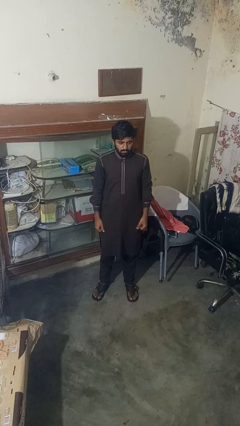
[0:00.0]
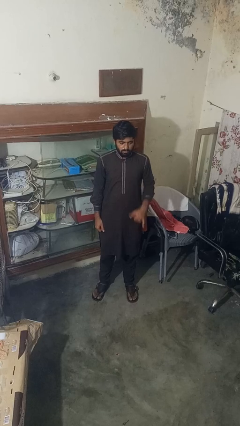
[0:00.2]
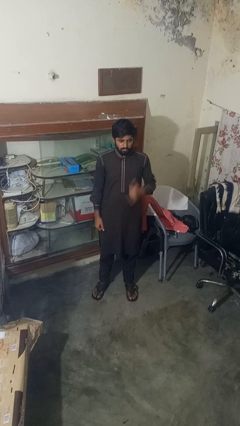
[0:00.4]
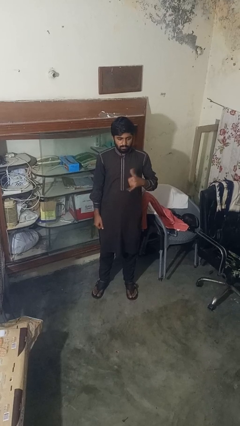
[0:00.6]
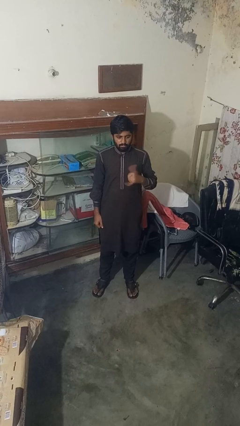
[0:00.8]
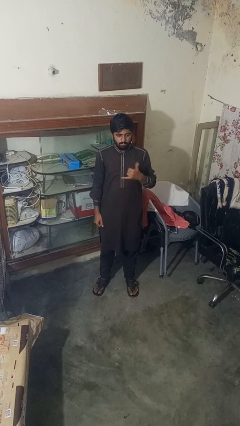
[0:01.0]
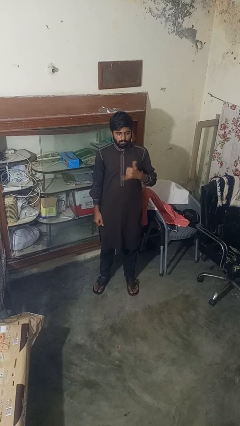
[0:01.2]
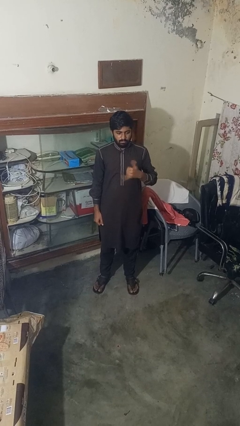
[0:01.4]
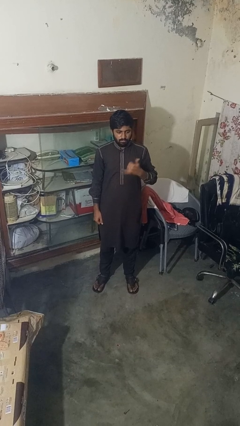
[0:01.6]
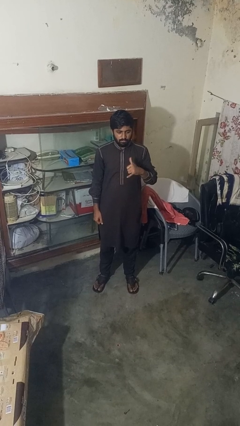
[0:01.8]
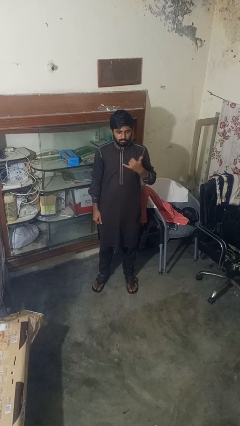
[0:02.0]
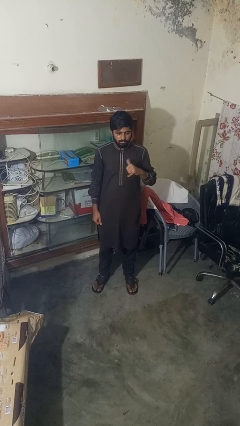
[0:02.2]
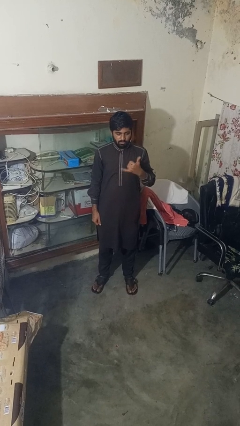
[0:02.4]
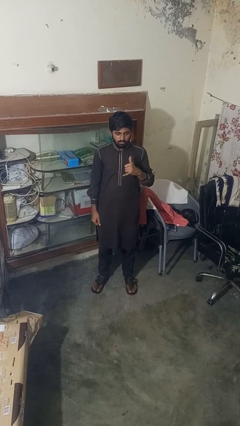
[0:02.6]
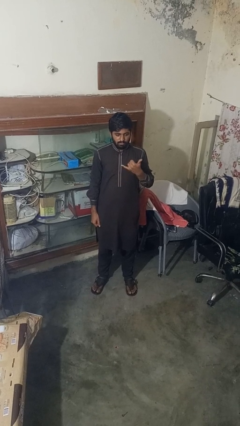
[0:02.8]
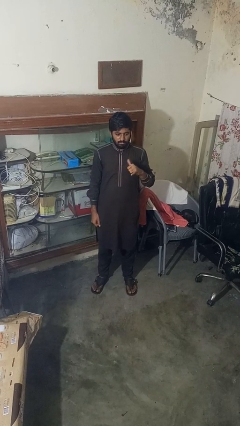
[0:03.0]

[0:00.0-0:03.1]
person gestures hang loose

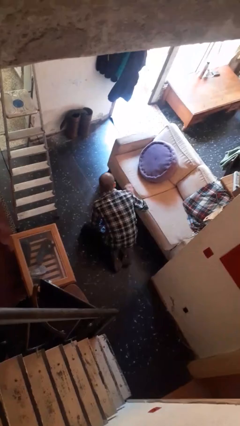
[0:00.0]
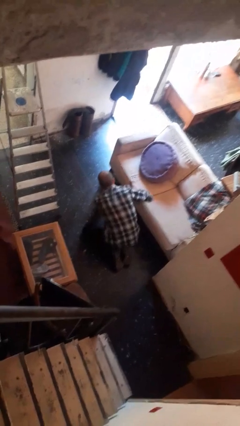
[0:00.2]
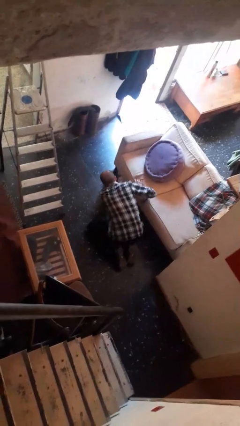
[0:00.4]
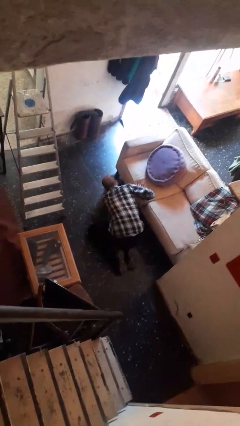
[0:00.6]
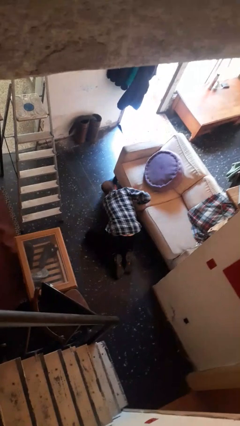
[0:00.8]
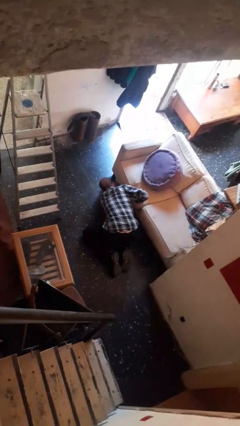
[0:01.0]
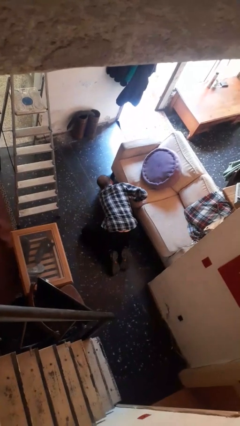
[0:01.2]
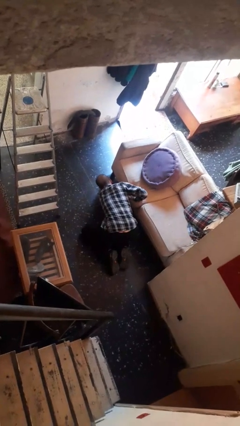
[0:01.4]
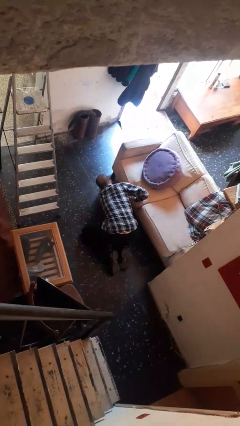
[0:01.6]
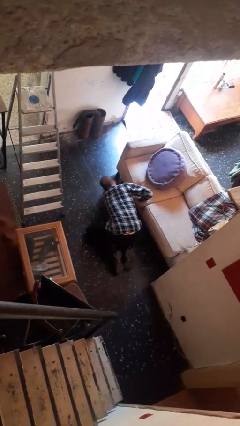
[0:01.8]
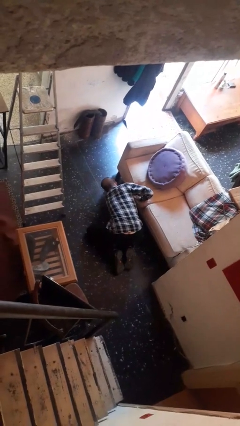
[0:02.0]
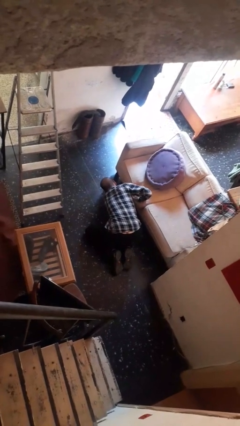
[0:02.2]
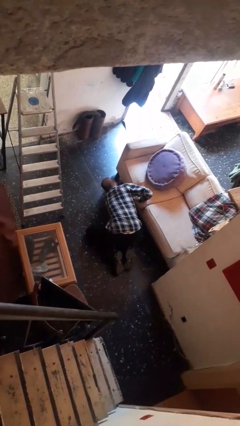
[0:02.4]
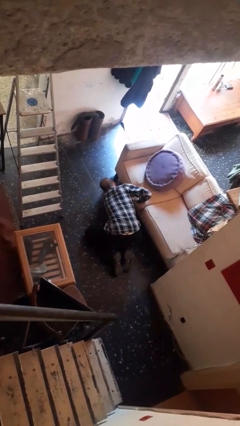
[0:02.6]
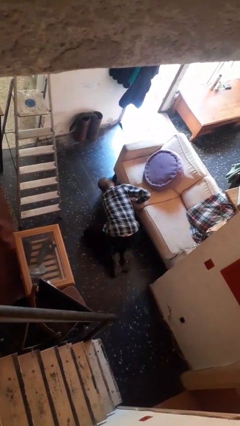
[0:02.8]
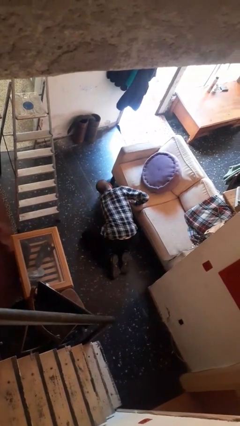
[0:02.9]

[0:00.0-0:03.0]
person searches under couch

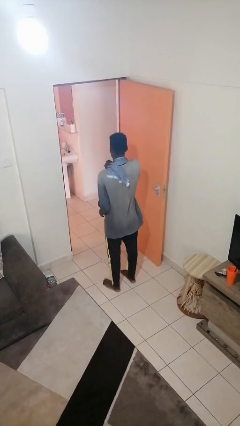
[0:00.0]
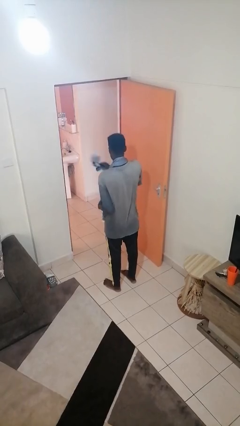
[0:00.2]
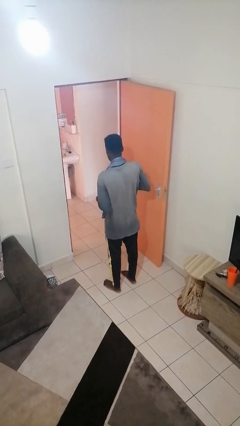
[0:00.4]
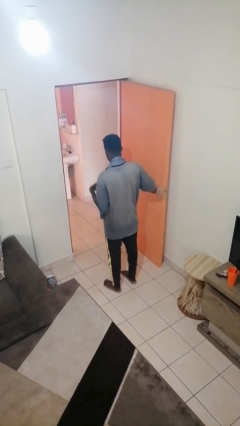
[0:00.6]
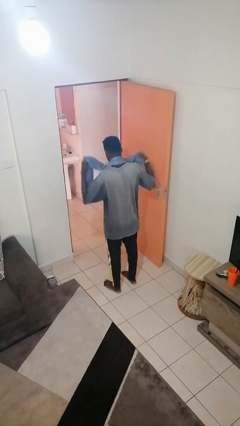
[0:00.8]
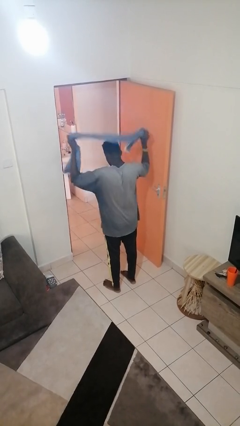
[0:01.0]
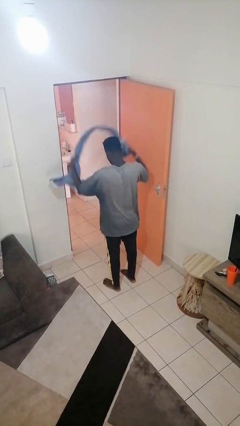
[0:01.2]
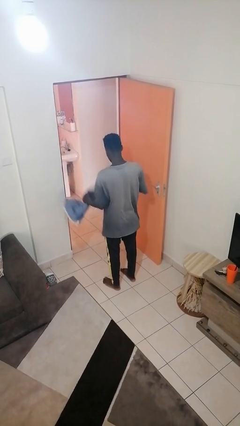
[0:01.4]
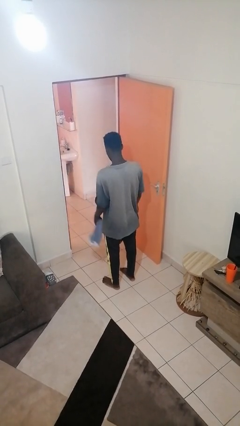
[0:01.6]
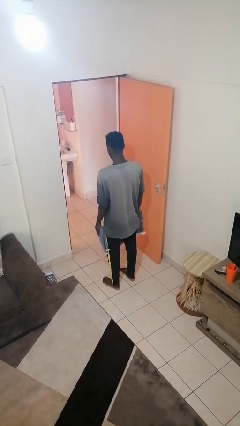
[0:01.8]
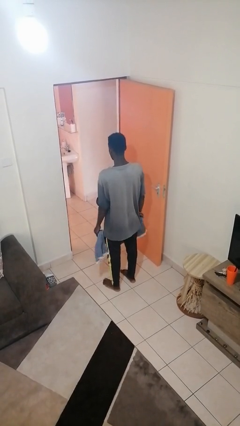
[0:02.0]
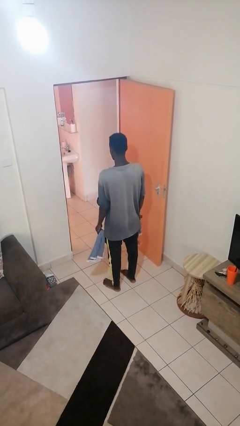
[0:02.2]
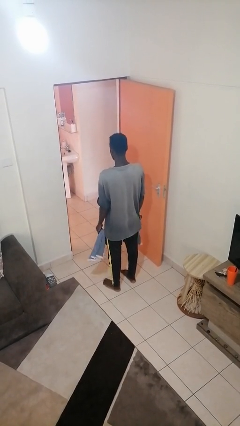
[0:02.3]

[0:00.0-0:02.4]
person takes off scarf

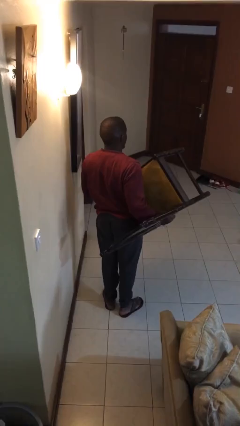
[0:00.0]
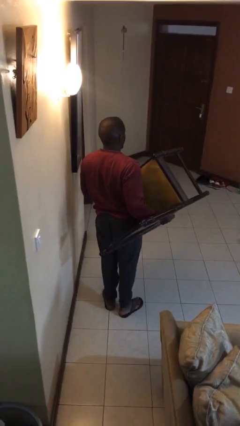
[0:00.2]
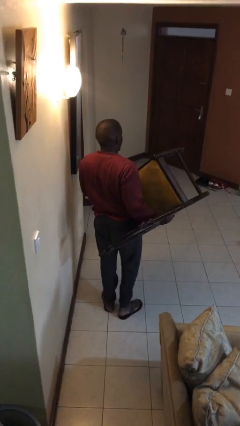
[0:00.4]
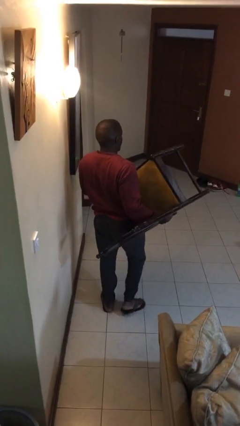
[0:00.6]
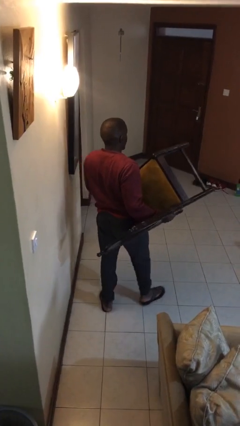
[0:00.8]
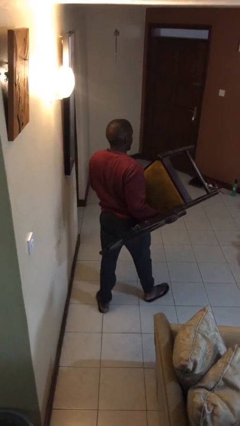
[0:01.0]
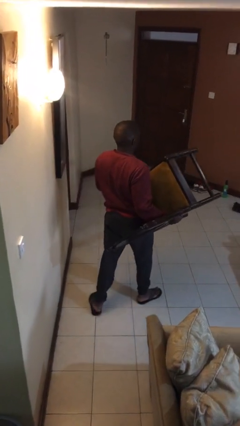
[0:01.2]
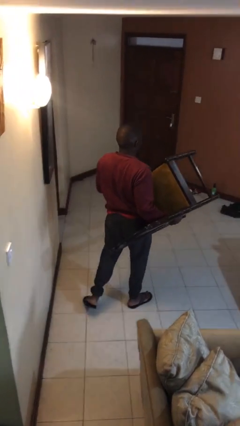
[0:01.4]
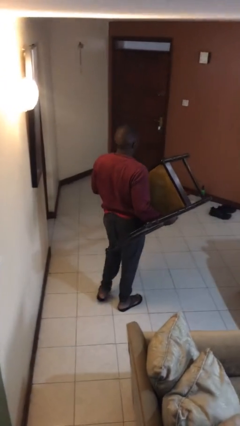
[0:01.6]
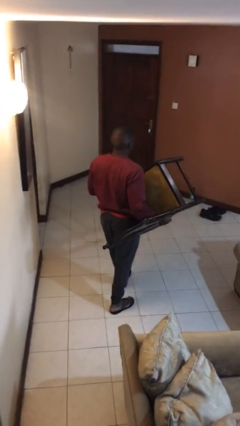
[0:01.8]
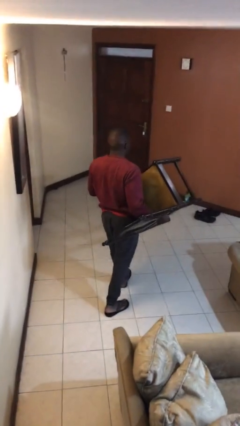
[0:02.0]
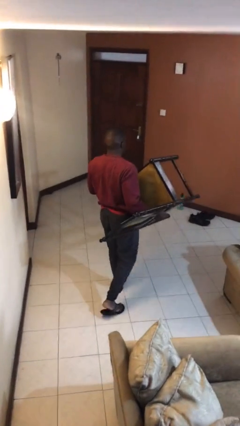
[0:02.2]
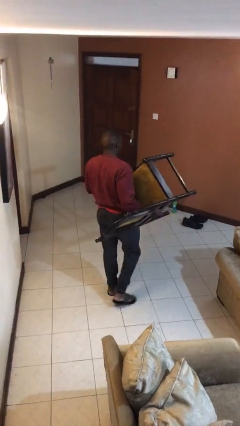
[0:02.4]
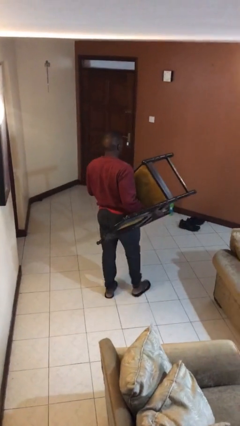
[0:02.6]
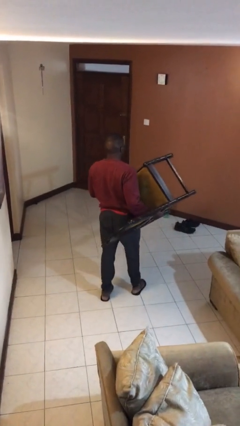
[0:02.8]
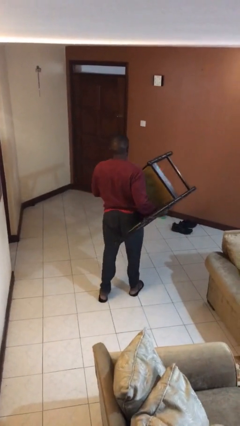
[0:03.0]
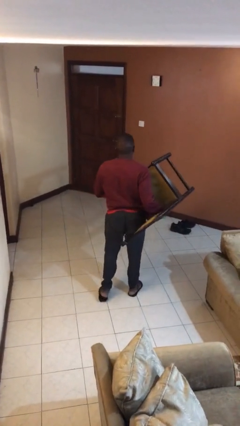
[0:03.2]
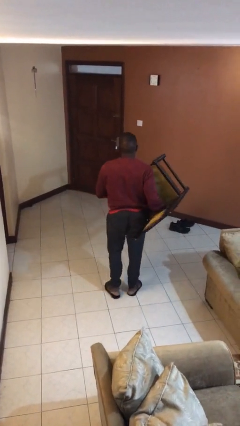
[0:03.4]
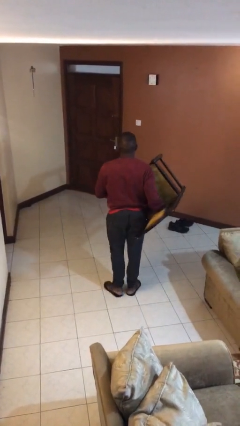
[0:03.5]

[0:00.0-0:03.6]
person carries furniture

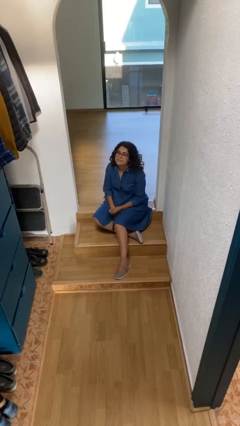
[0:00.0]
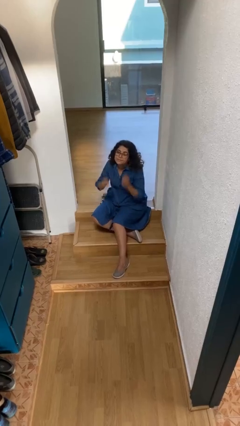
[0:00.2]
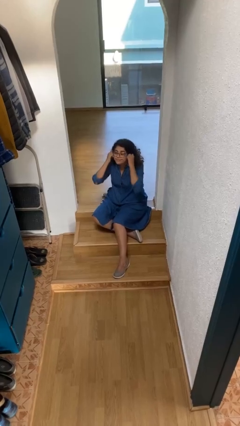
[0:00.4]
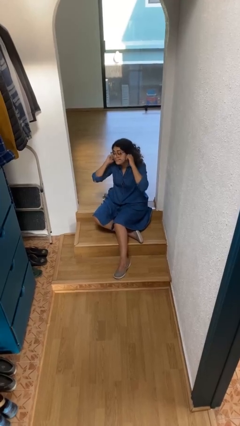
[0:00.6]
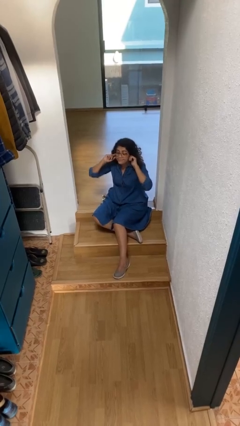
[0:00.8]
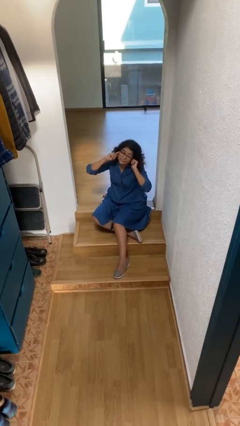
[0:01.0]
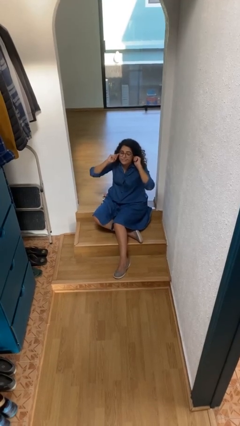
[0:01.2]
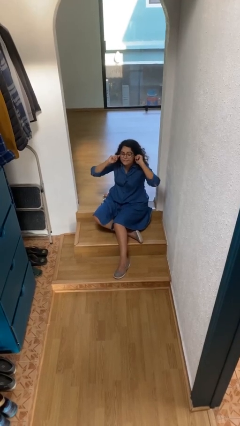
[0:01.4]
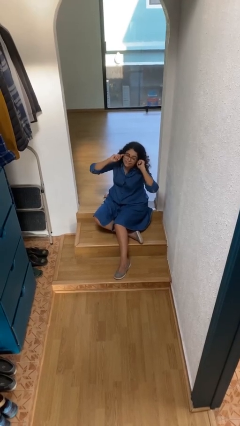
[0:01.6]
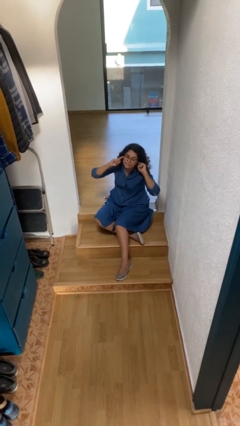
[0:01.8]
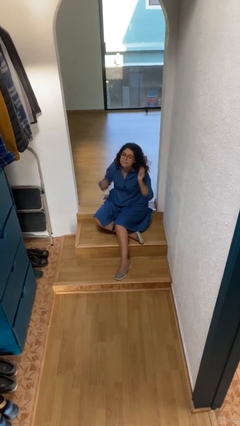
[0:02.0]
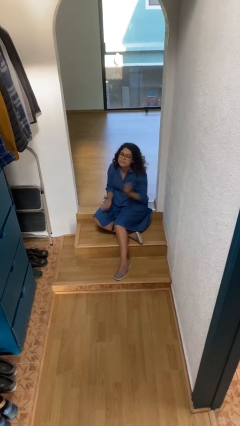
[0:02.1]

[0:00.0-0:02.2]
person puts fingers in ear

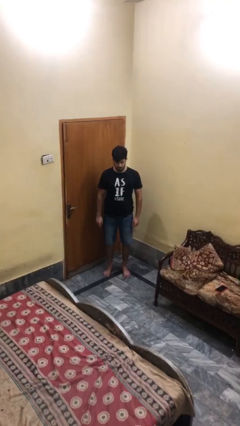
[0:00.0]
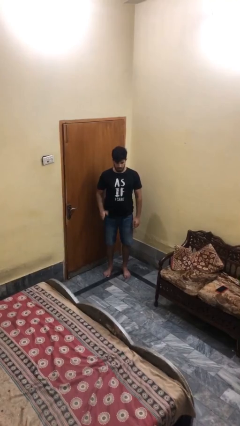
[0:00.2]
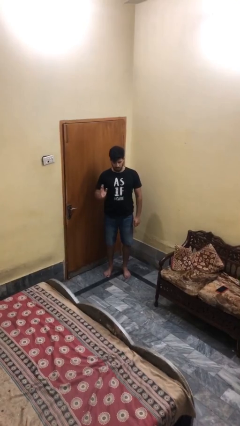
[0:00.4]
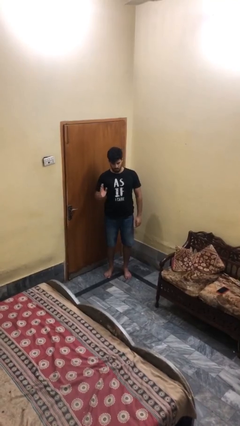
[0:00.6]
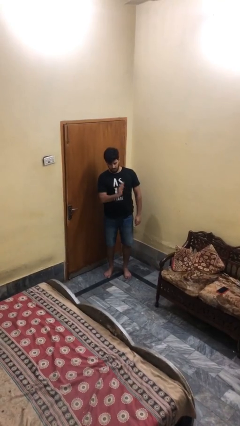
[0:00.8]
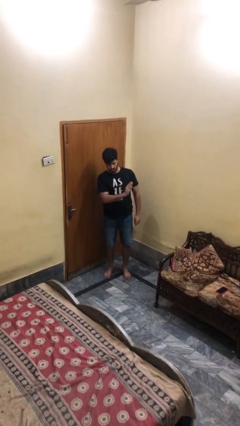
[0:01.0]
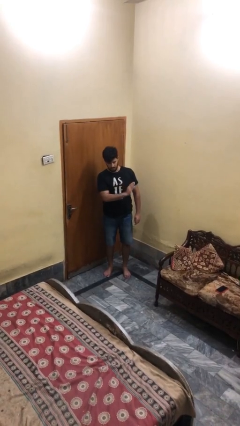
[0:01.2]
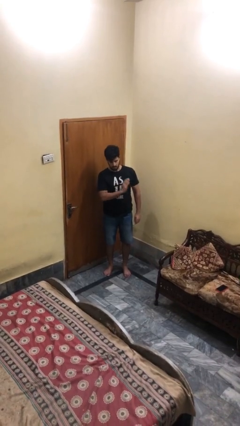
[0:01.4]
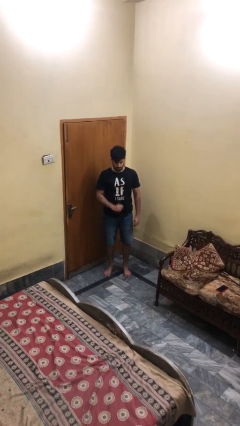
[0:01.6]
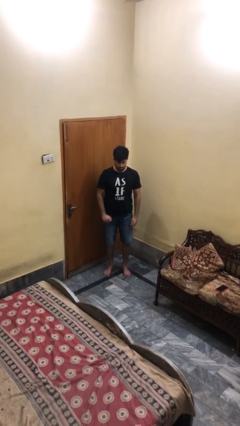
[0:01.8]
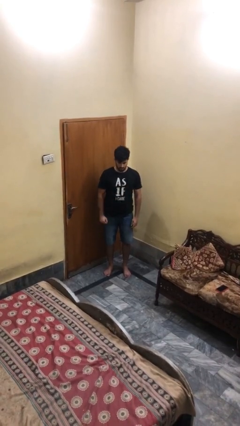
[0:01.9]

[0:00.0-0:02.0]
person gestures swipe left

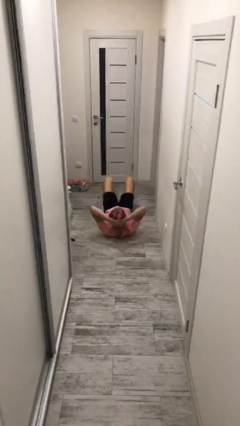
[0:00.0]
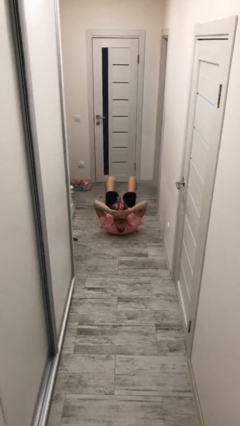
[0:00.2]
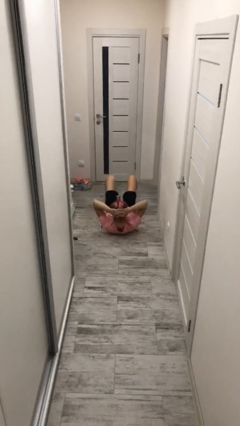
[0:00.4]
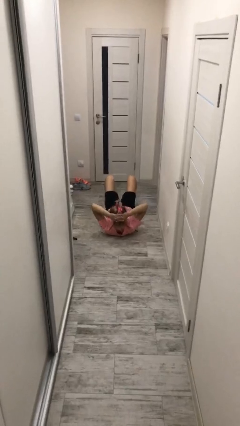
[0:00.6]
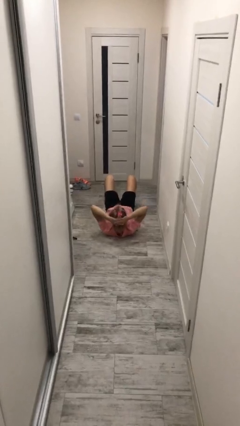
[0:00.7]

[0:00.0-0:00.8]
person exercises with situp

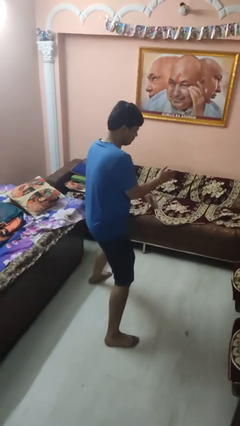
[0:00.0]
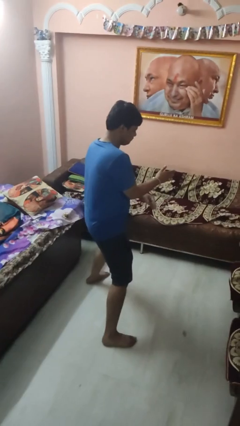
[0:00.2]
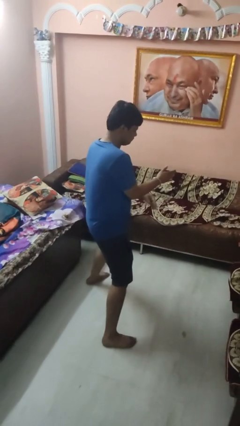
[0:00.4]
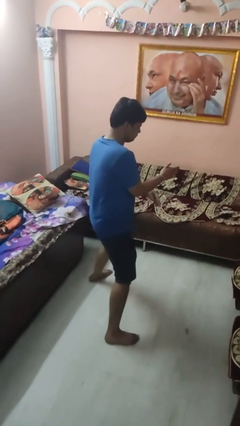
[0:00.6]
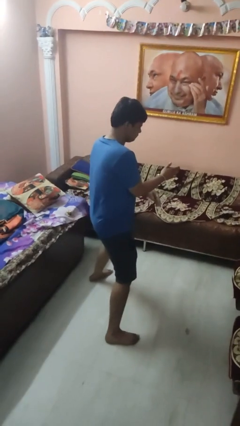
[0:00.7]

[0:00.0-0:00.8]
person karate chop
